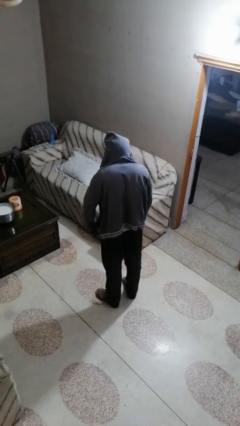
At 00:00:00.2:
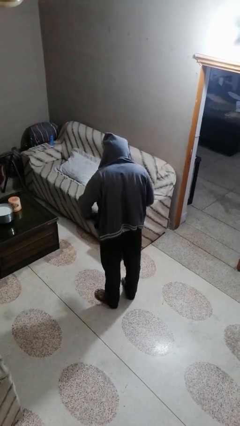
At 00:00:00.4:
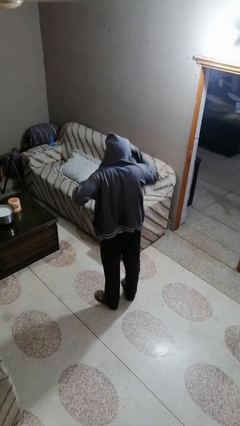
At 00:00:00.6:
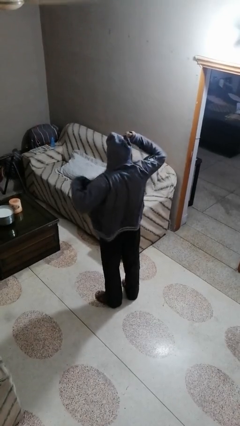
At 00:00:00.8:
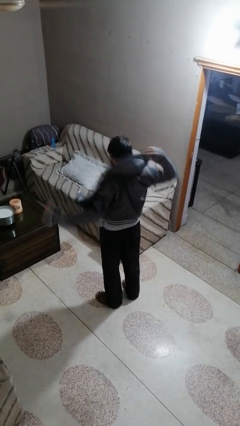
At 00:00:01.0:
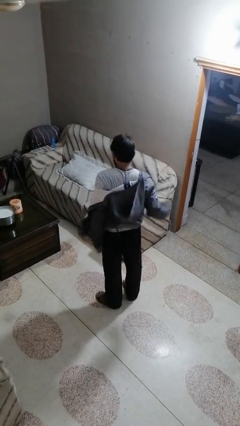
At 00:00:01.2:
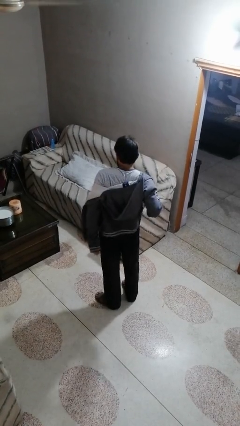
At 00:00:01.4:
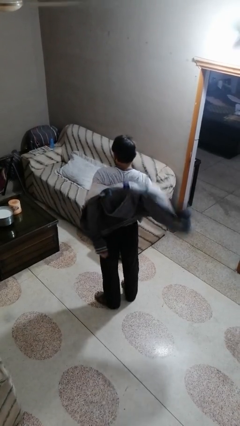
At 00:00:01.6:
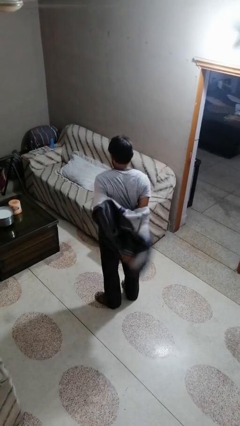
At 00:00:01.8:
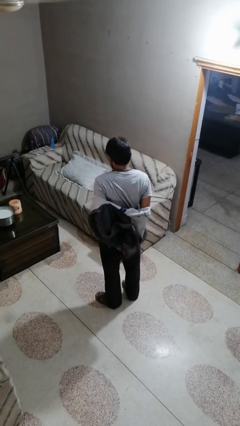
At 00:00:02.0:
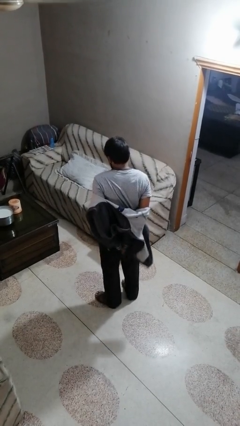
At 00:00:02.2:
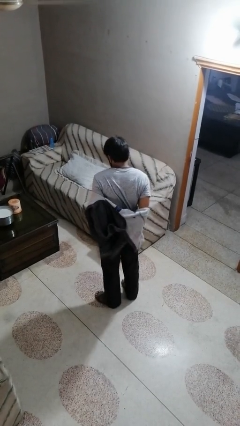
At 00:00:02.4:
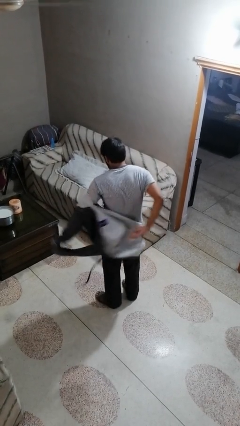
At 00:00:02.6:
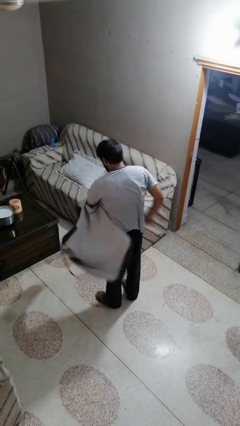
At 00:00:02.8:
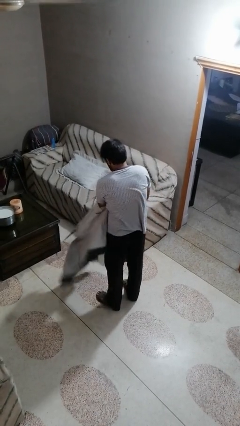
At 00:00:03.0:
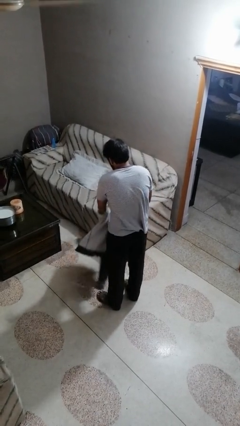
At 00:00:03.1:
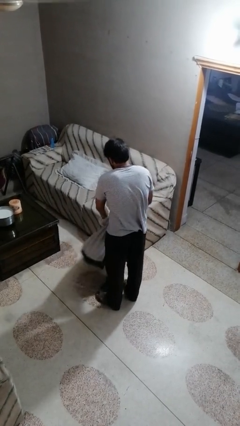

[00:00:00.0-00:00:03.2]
person takes off hoodie

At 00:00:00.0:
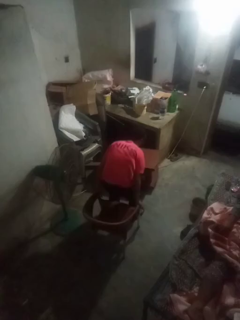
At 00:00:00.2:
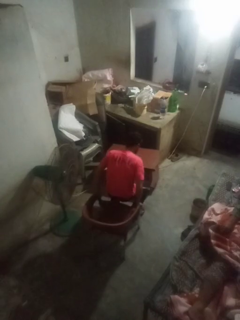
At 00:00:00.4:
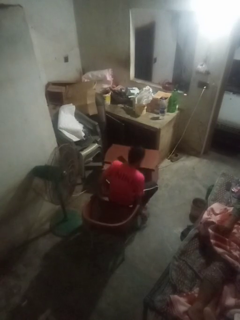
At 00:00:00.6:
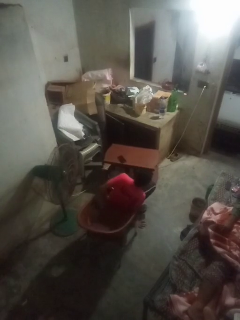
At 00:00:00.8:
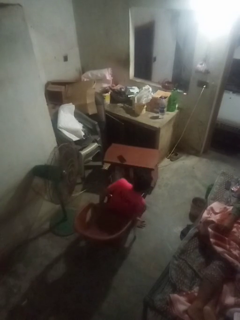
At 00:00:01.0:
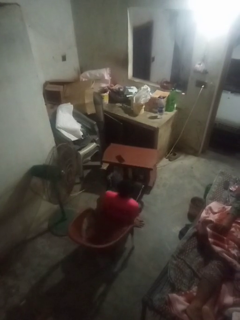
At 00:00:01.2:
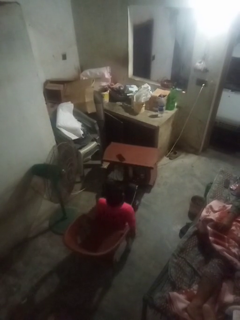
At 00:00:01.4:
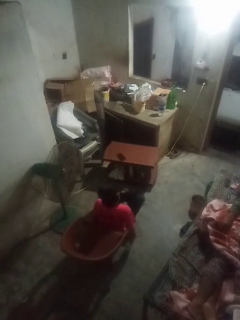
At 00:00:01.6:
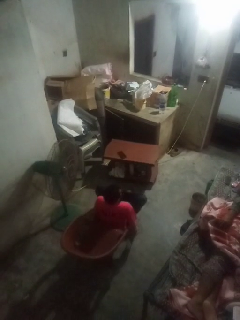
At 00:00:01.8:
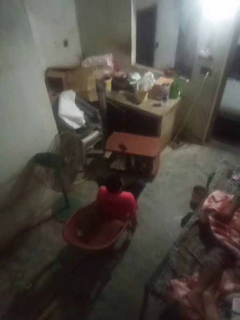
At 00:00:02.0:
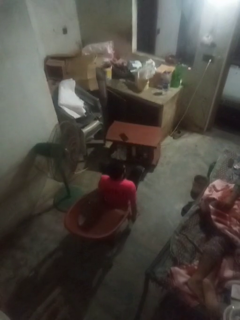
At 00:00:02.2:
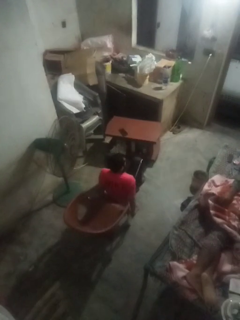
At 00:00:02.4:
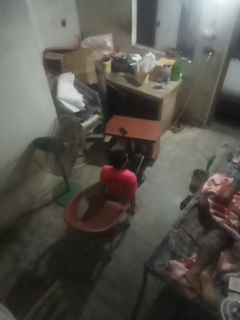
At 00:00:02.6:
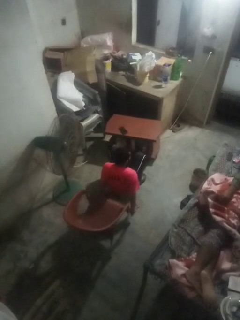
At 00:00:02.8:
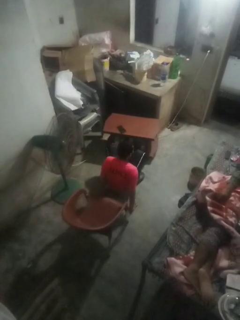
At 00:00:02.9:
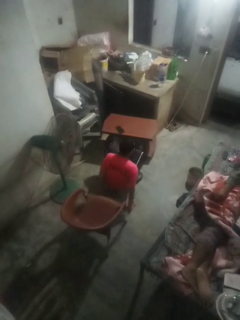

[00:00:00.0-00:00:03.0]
person falls from chair

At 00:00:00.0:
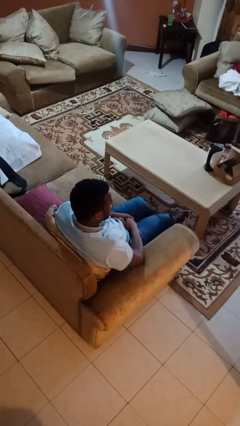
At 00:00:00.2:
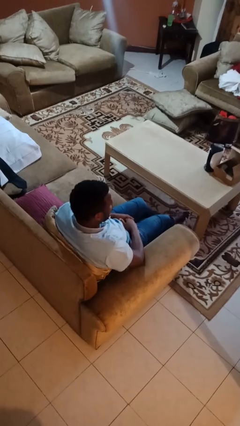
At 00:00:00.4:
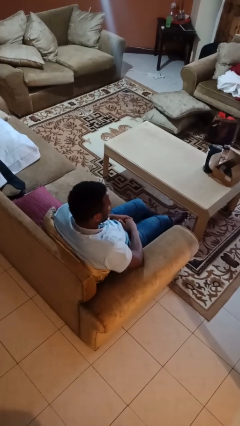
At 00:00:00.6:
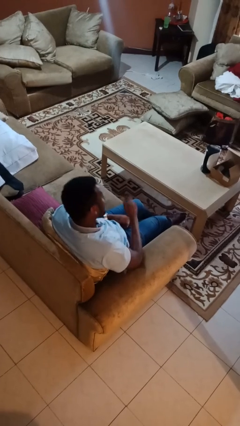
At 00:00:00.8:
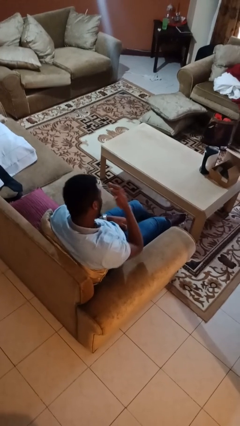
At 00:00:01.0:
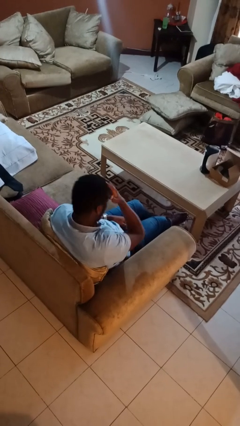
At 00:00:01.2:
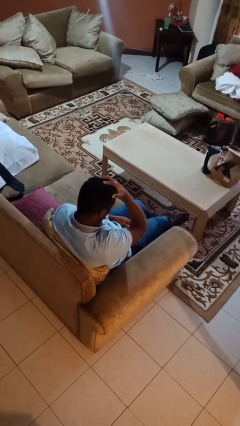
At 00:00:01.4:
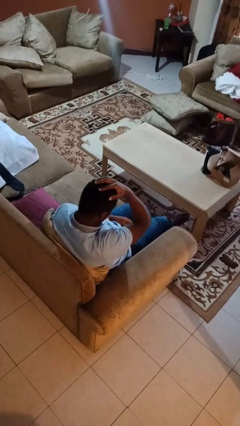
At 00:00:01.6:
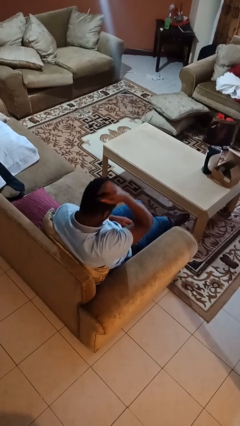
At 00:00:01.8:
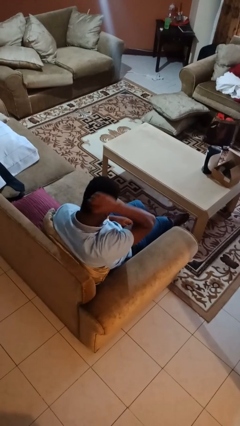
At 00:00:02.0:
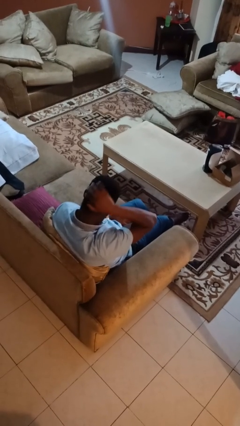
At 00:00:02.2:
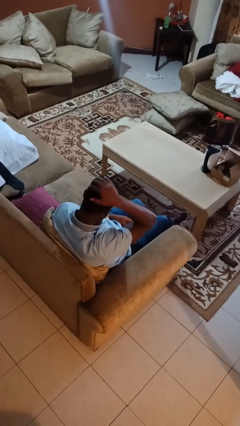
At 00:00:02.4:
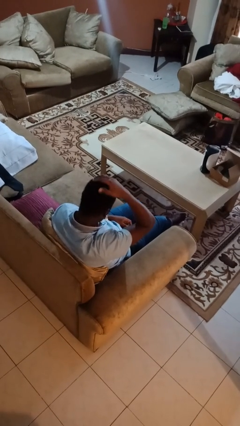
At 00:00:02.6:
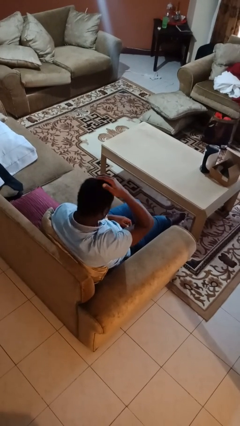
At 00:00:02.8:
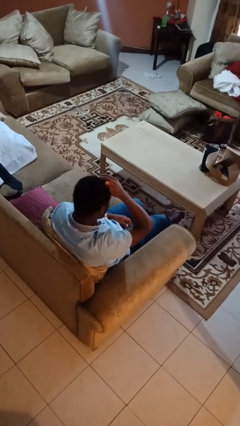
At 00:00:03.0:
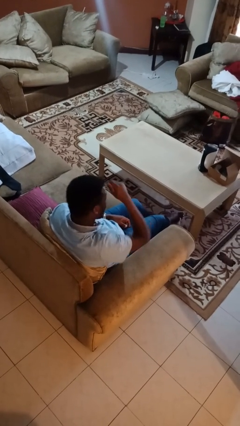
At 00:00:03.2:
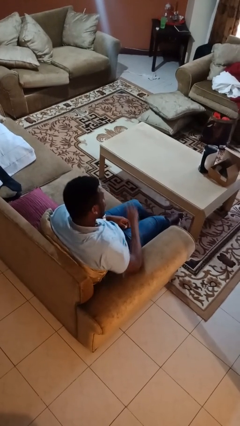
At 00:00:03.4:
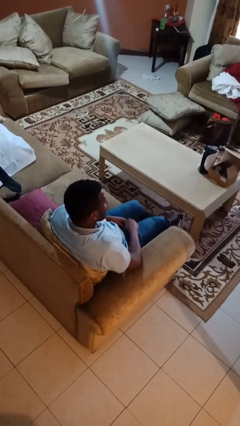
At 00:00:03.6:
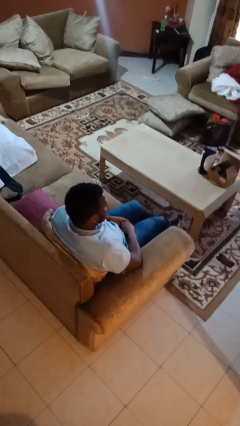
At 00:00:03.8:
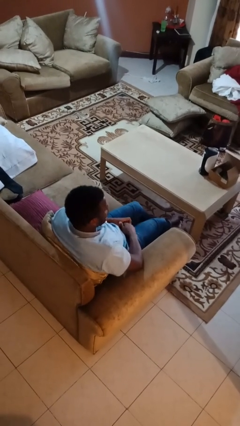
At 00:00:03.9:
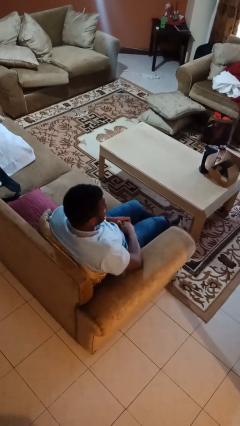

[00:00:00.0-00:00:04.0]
person strokes hair

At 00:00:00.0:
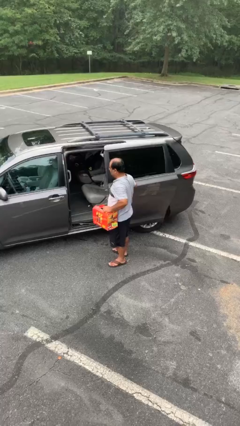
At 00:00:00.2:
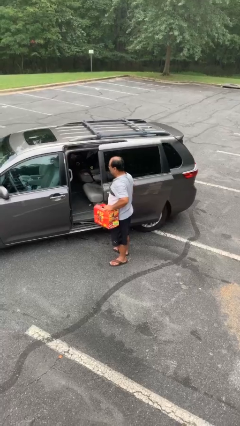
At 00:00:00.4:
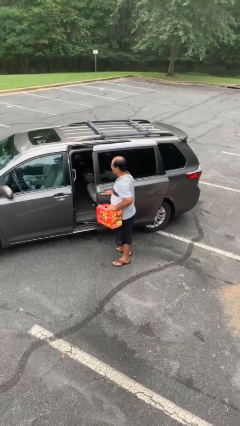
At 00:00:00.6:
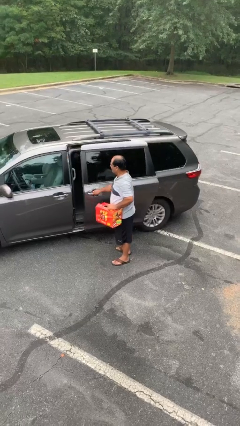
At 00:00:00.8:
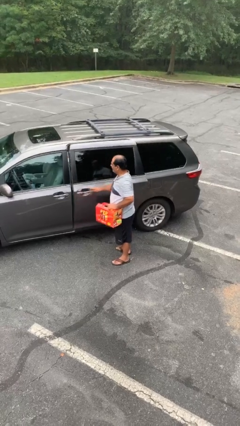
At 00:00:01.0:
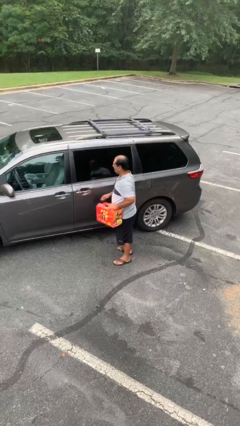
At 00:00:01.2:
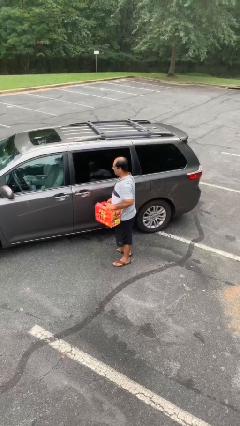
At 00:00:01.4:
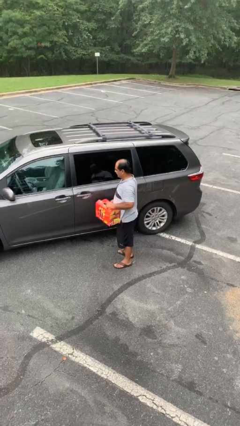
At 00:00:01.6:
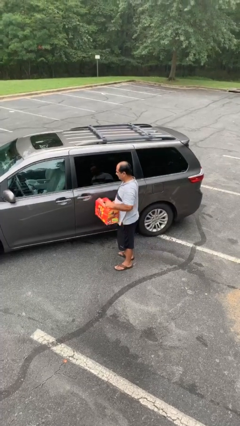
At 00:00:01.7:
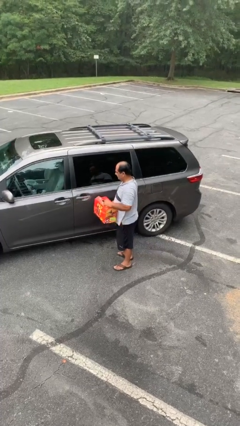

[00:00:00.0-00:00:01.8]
person closes car door

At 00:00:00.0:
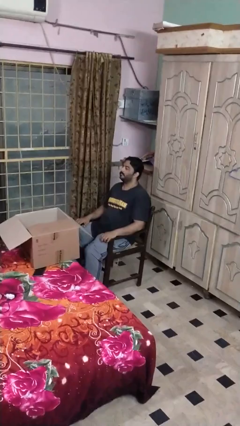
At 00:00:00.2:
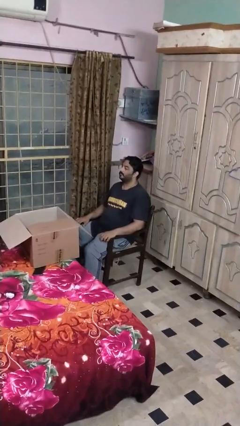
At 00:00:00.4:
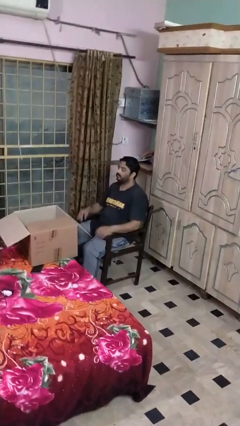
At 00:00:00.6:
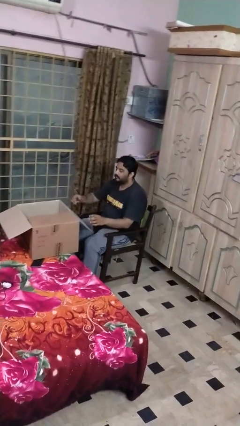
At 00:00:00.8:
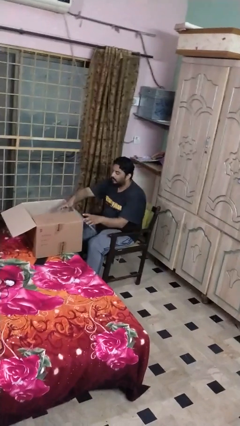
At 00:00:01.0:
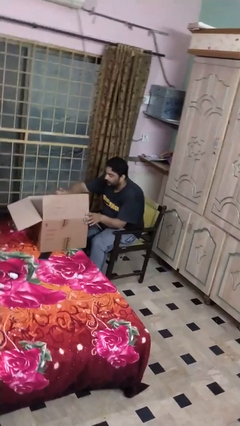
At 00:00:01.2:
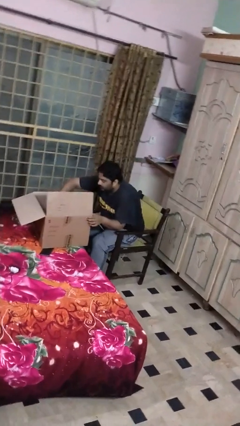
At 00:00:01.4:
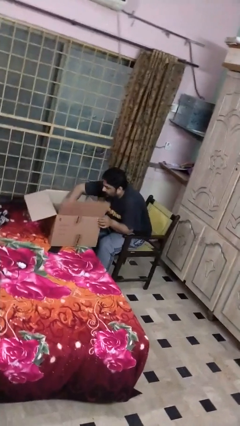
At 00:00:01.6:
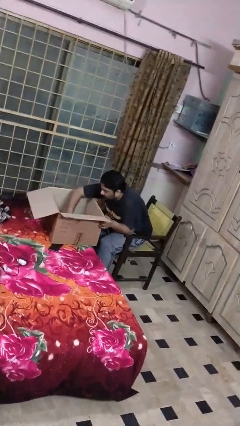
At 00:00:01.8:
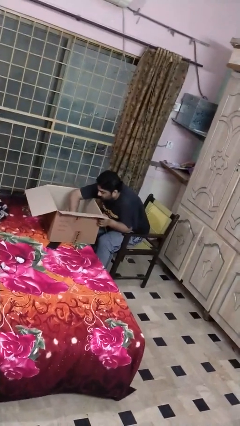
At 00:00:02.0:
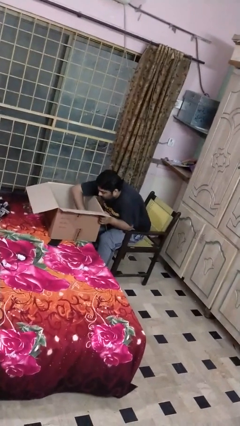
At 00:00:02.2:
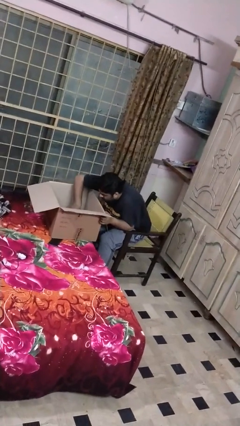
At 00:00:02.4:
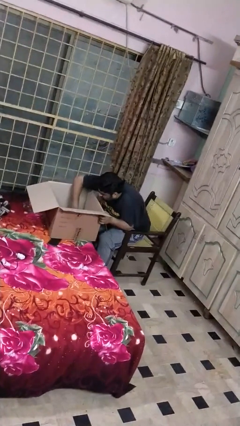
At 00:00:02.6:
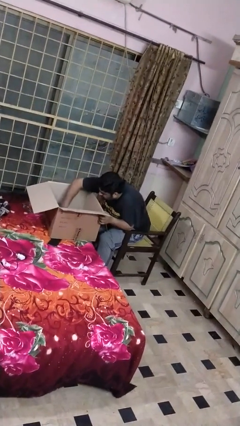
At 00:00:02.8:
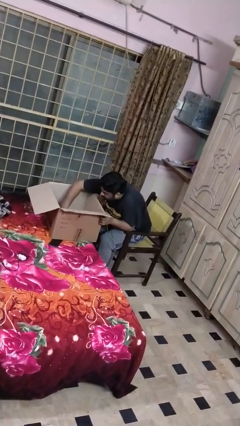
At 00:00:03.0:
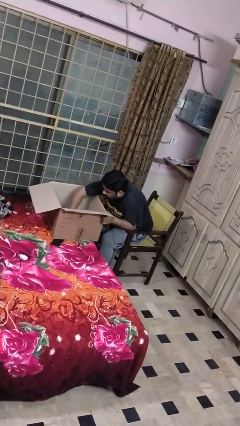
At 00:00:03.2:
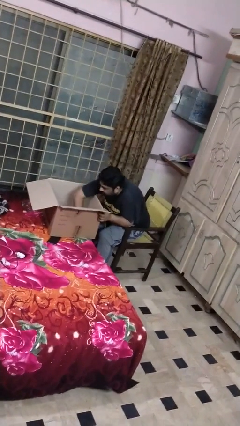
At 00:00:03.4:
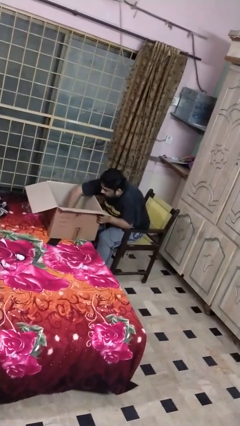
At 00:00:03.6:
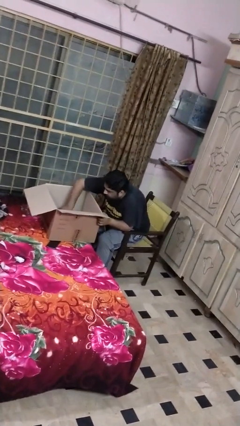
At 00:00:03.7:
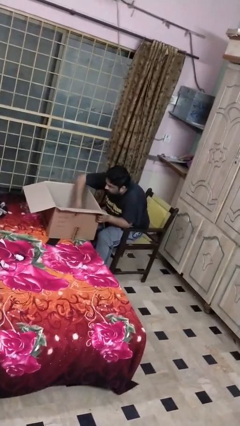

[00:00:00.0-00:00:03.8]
person searches in box

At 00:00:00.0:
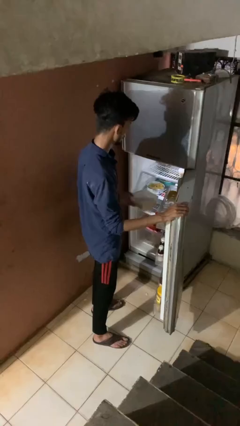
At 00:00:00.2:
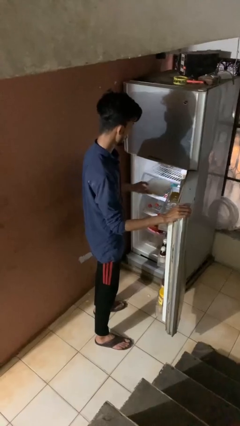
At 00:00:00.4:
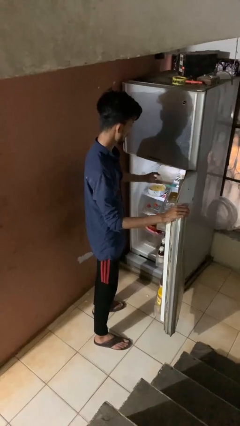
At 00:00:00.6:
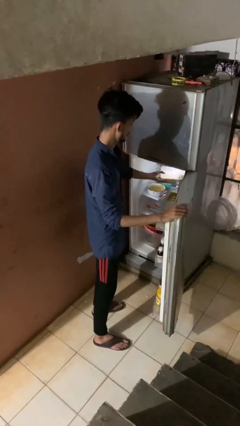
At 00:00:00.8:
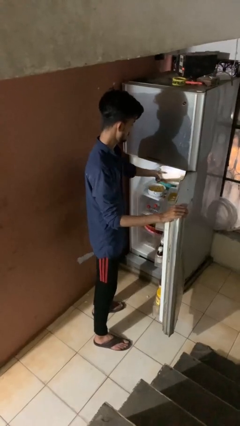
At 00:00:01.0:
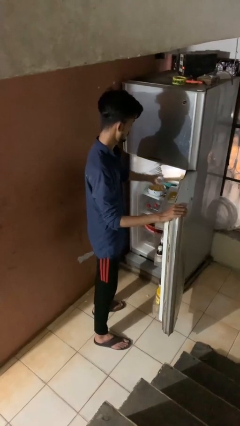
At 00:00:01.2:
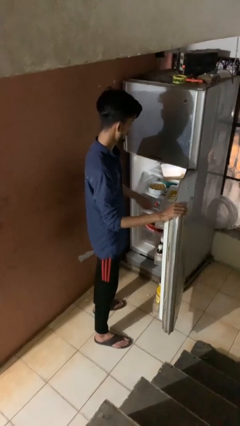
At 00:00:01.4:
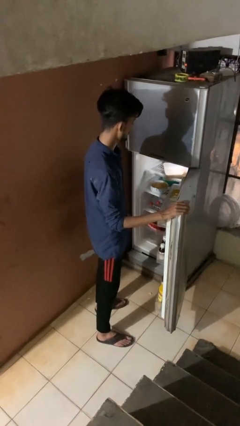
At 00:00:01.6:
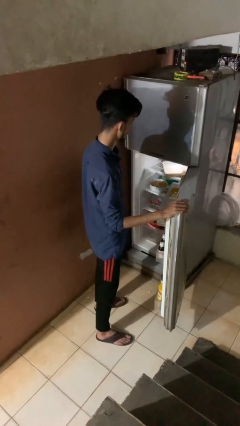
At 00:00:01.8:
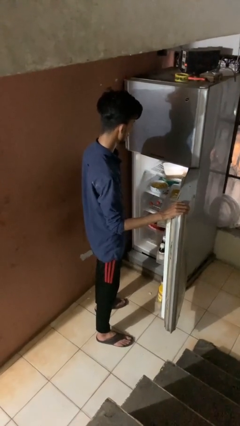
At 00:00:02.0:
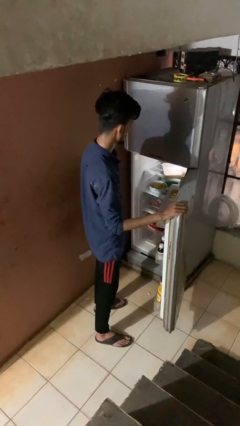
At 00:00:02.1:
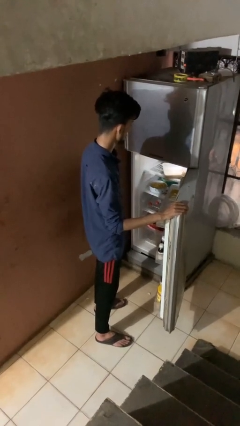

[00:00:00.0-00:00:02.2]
person loads groceries into refrigerator
